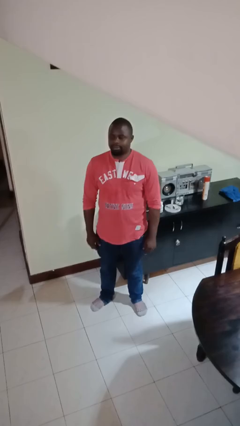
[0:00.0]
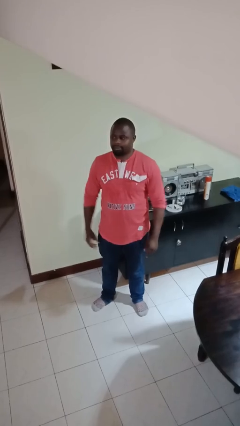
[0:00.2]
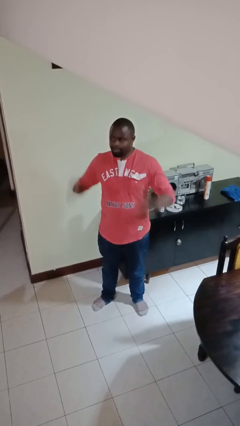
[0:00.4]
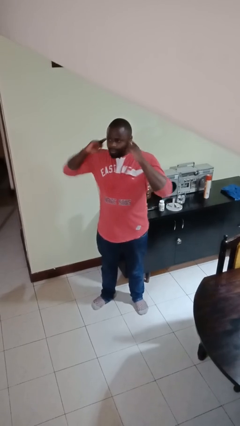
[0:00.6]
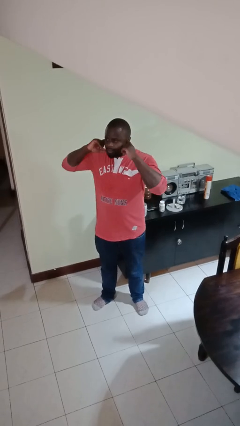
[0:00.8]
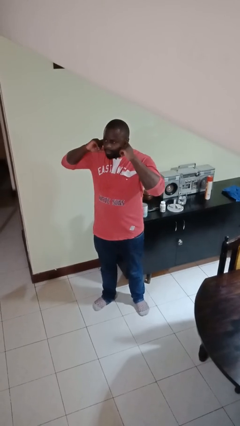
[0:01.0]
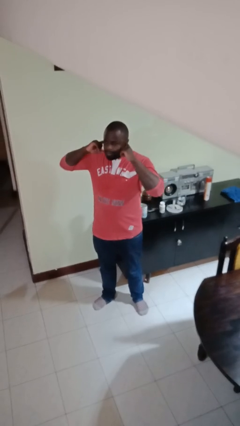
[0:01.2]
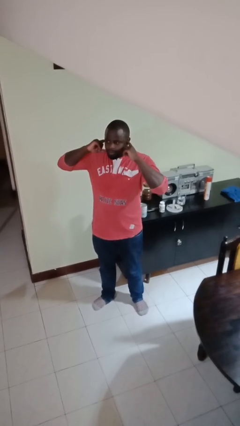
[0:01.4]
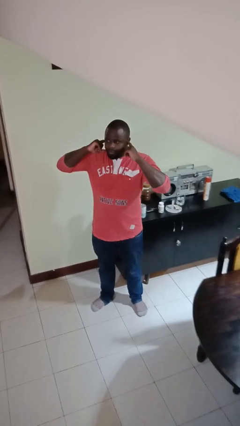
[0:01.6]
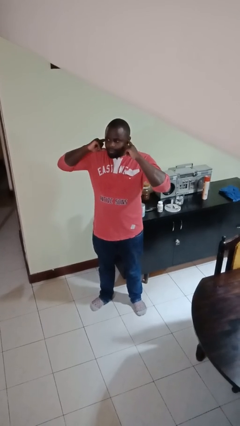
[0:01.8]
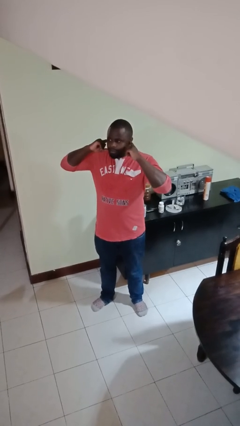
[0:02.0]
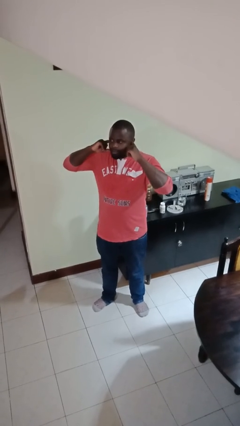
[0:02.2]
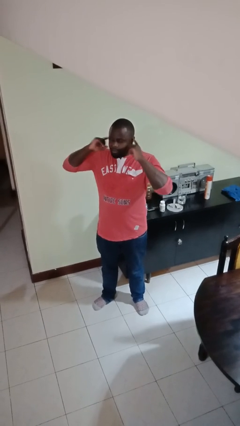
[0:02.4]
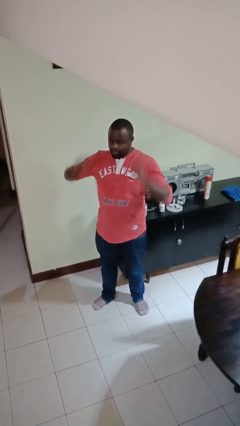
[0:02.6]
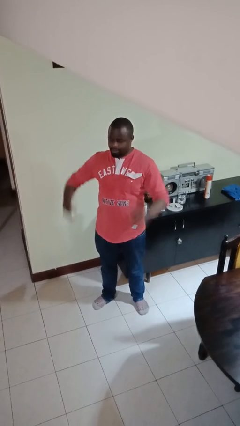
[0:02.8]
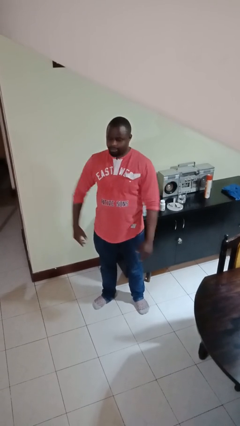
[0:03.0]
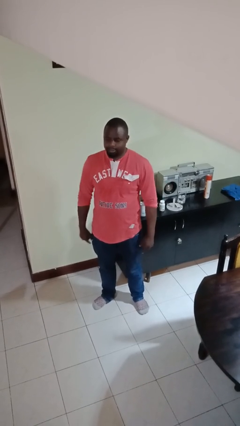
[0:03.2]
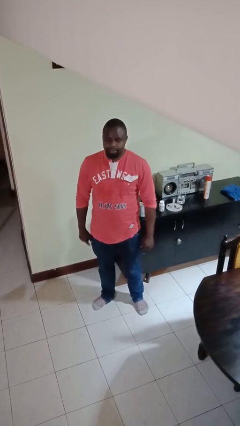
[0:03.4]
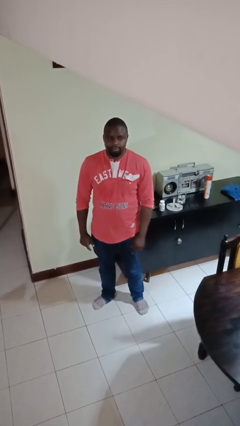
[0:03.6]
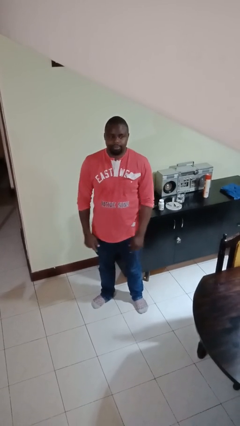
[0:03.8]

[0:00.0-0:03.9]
person puts fingers in ear

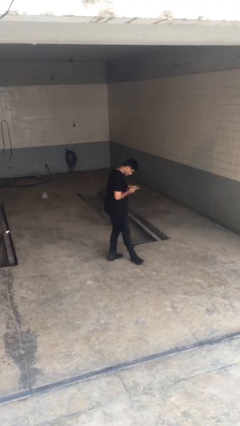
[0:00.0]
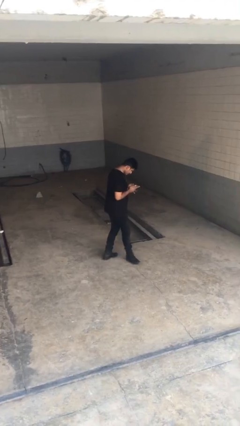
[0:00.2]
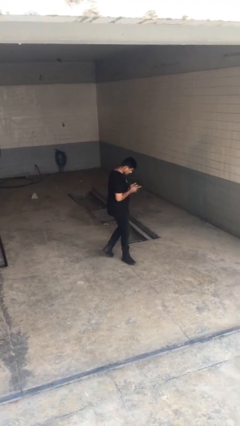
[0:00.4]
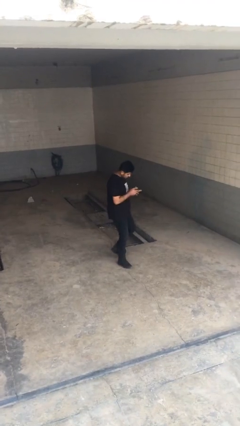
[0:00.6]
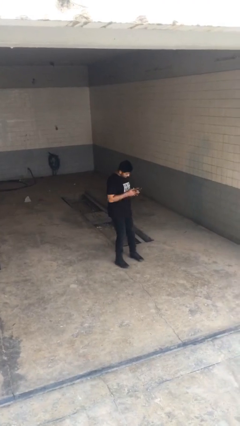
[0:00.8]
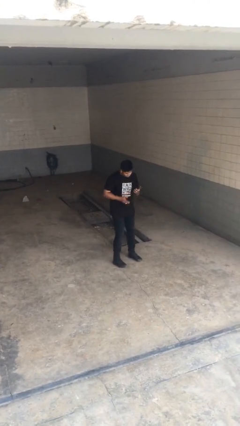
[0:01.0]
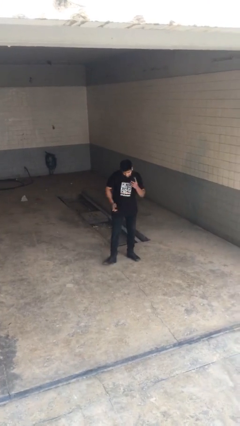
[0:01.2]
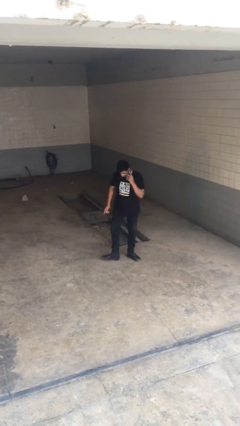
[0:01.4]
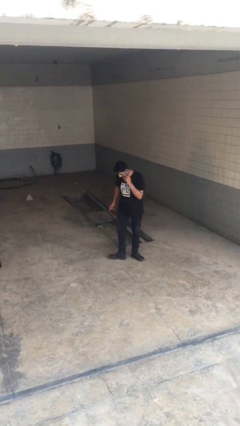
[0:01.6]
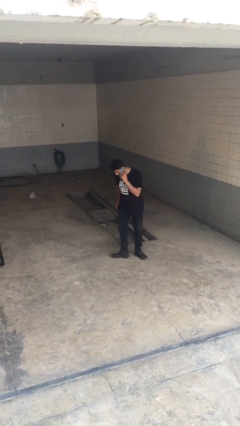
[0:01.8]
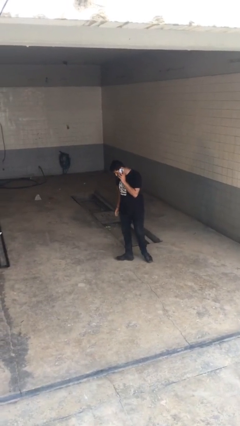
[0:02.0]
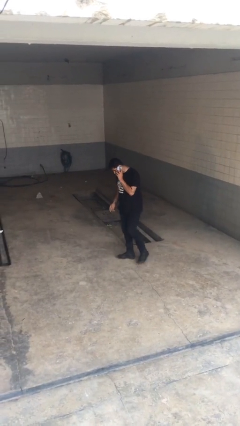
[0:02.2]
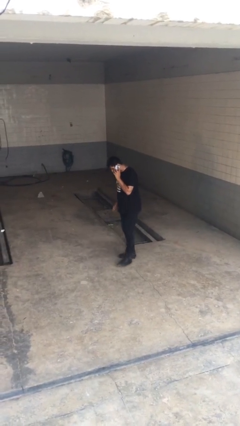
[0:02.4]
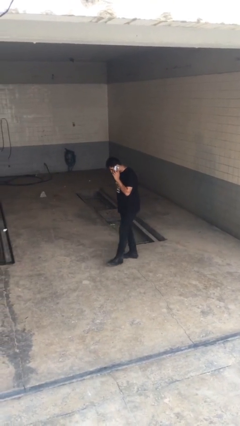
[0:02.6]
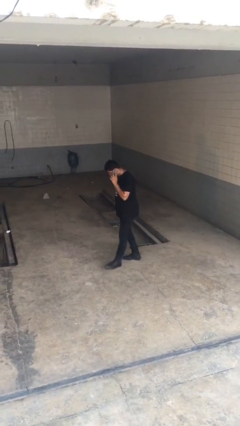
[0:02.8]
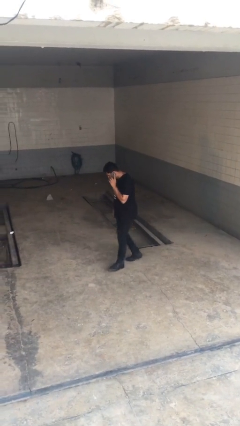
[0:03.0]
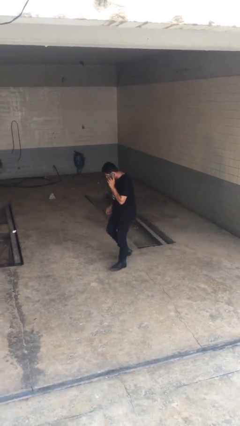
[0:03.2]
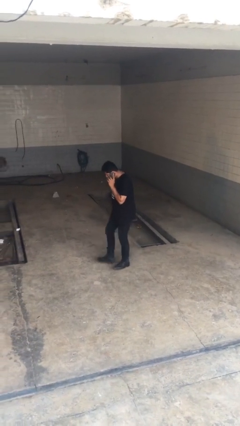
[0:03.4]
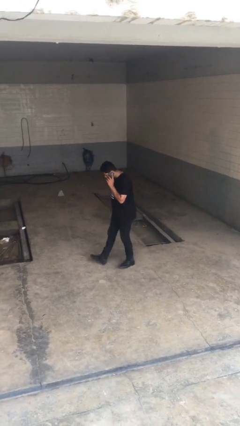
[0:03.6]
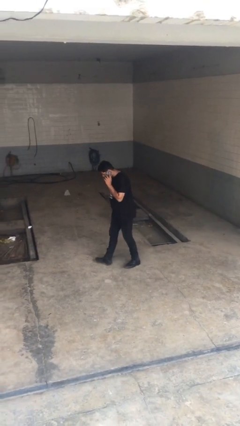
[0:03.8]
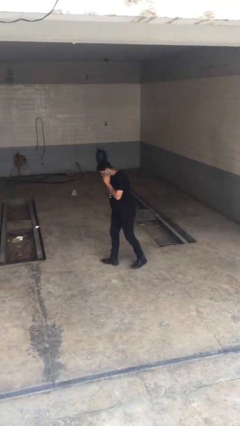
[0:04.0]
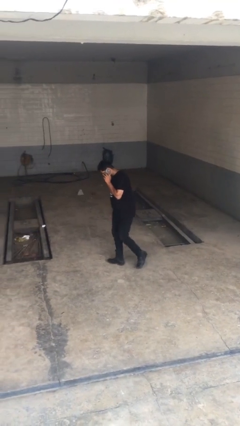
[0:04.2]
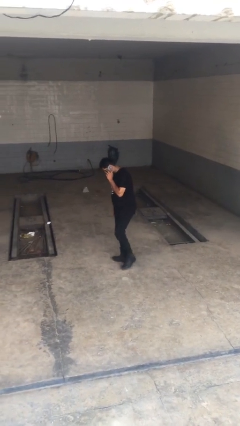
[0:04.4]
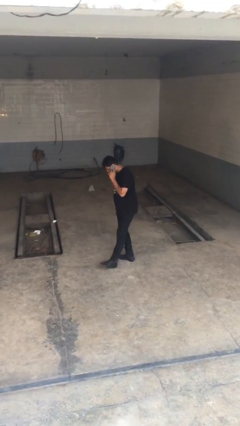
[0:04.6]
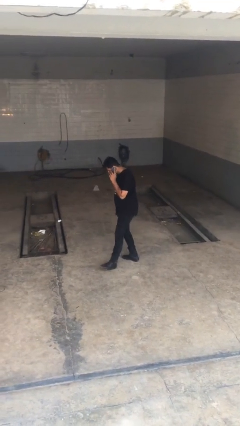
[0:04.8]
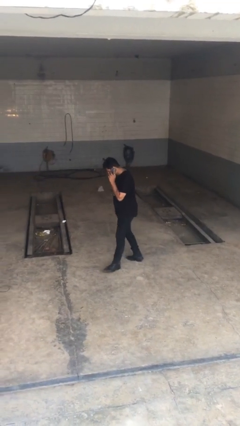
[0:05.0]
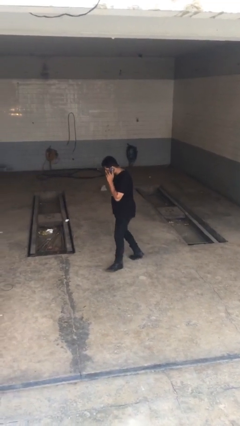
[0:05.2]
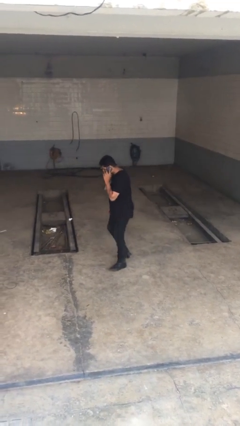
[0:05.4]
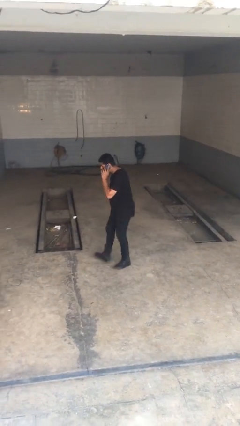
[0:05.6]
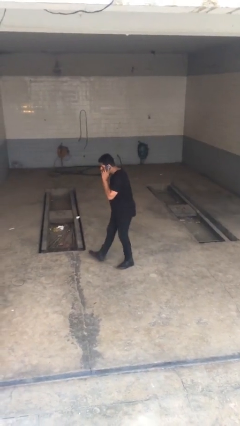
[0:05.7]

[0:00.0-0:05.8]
person talks on phone

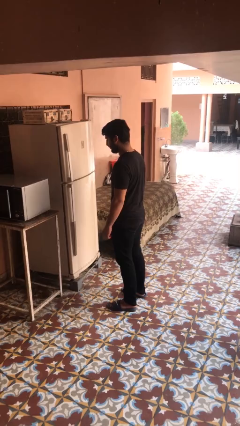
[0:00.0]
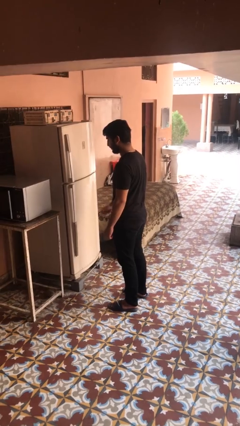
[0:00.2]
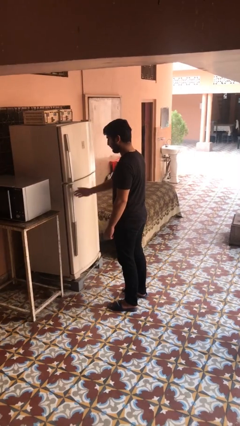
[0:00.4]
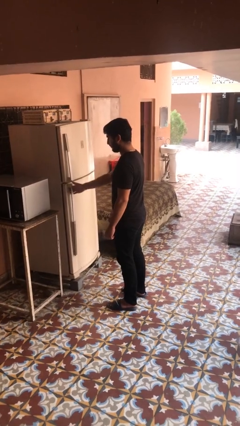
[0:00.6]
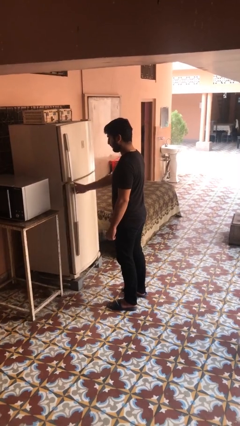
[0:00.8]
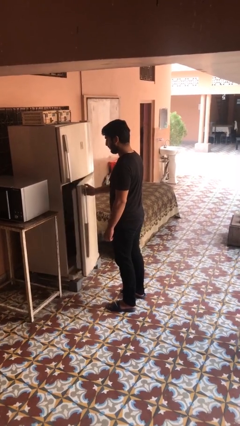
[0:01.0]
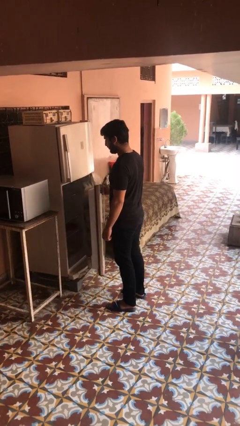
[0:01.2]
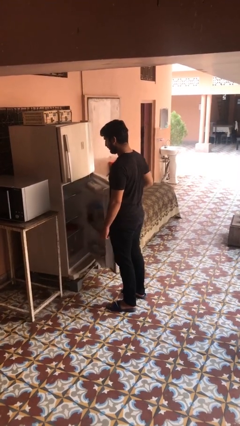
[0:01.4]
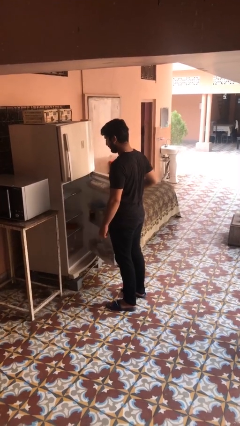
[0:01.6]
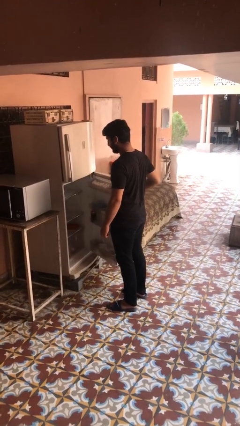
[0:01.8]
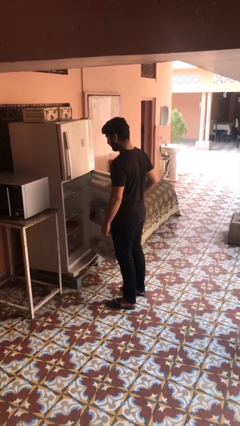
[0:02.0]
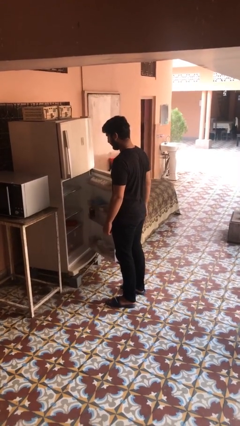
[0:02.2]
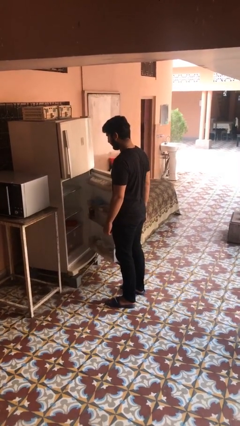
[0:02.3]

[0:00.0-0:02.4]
person opens refrigerator

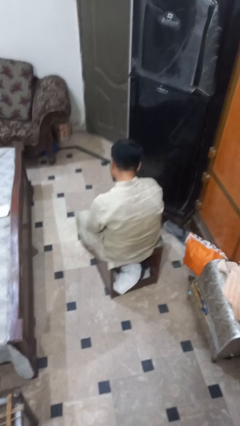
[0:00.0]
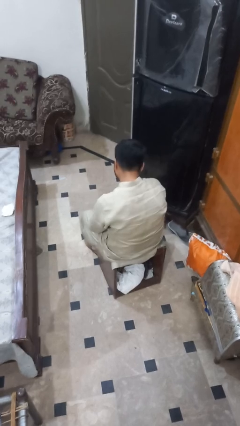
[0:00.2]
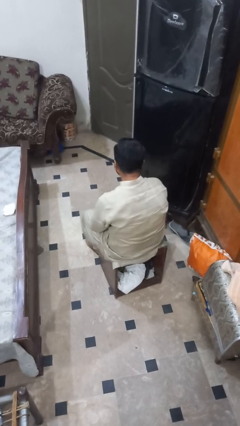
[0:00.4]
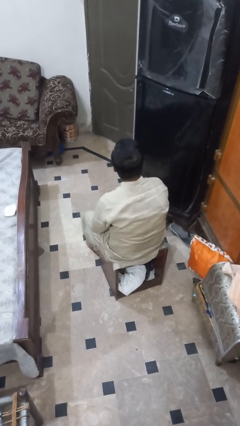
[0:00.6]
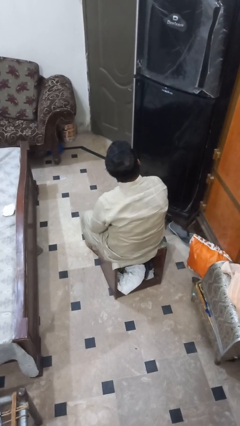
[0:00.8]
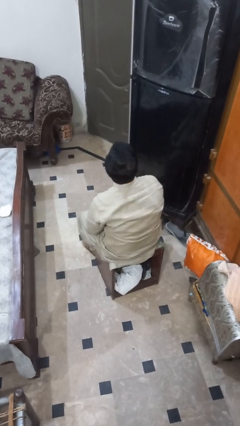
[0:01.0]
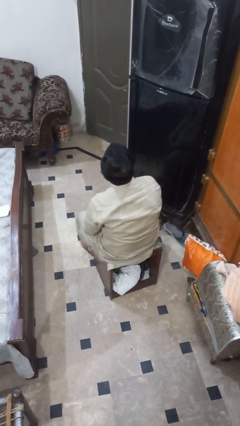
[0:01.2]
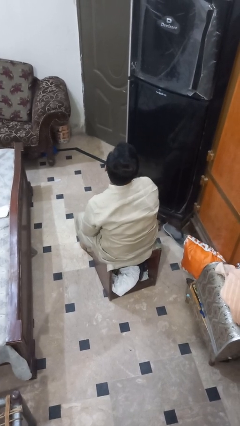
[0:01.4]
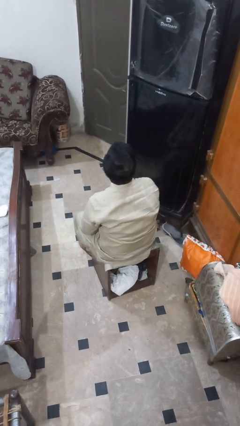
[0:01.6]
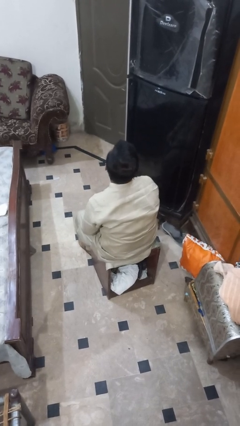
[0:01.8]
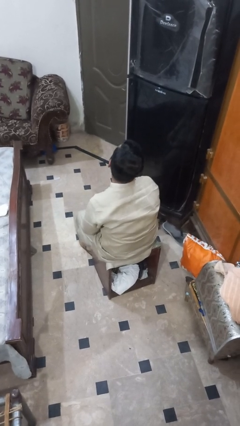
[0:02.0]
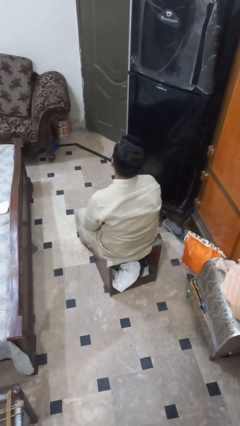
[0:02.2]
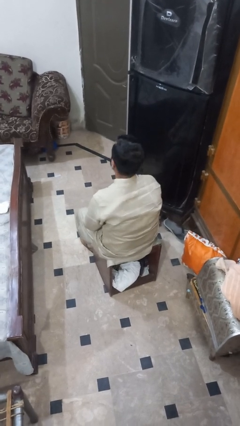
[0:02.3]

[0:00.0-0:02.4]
person sticks out tongue

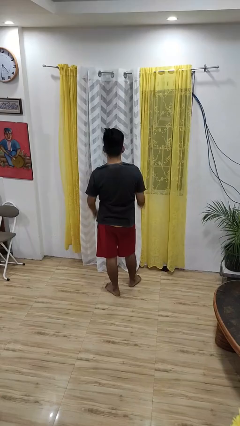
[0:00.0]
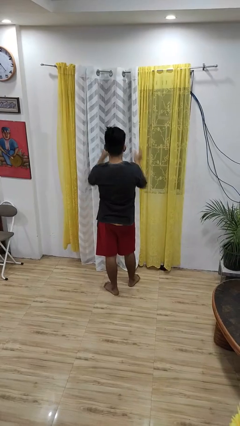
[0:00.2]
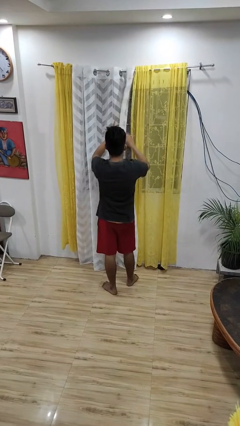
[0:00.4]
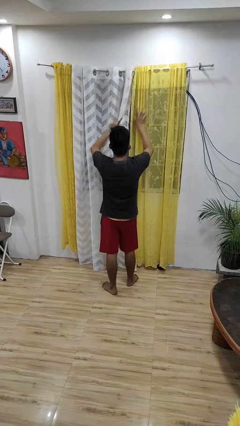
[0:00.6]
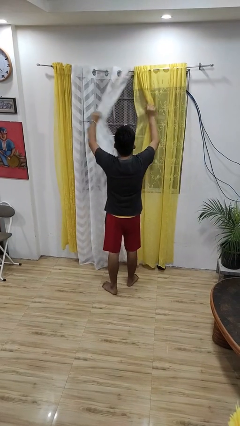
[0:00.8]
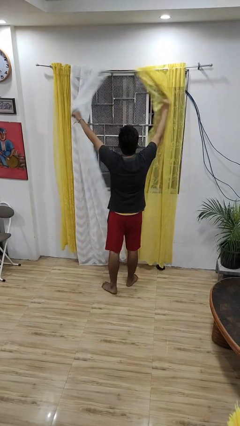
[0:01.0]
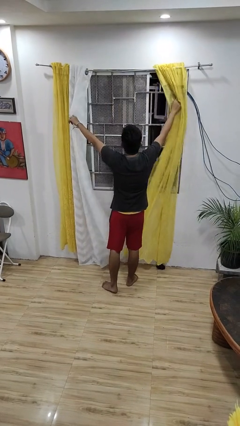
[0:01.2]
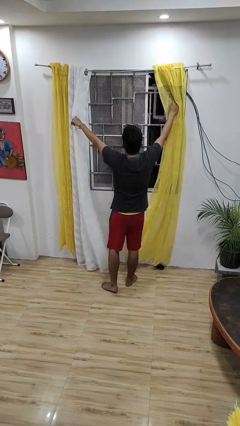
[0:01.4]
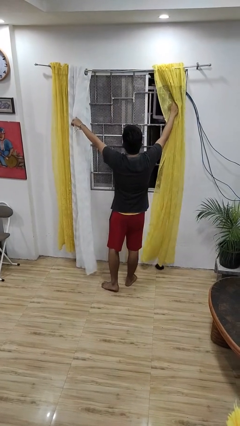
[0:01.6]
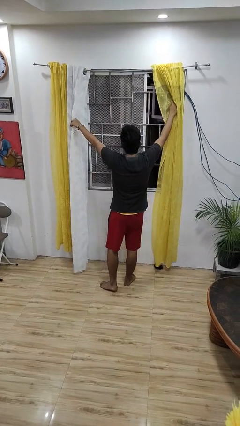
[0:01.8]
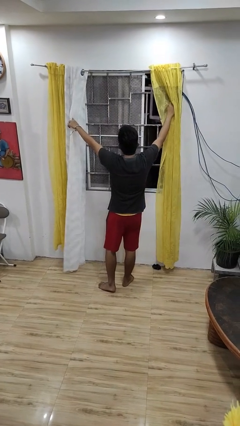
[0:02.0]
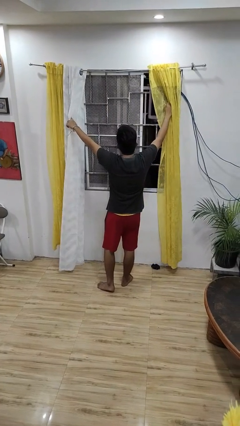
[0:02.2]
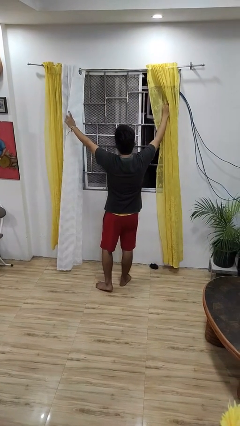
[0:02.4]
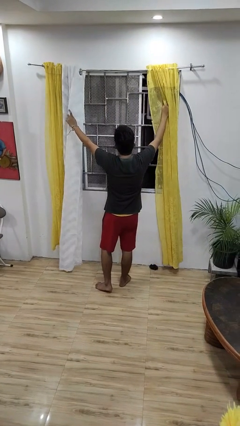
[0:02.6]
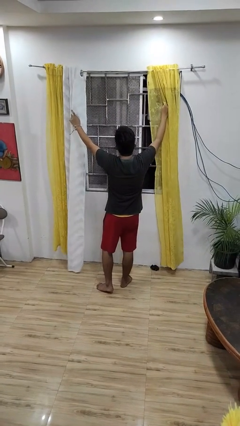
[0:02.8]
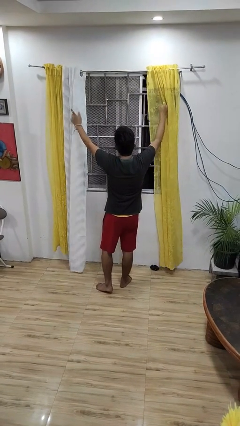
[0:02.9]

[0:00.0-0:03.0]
person opens curtains

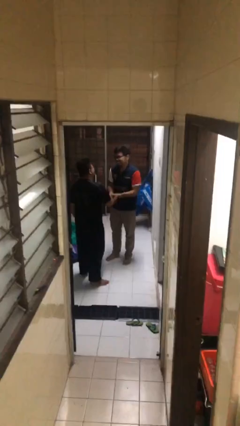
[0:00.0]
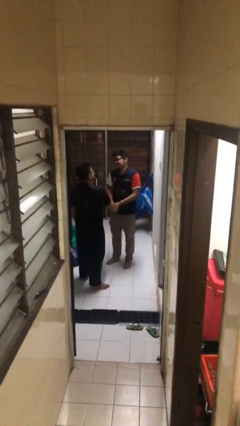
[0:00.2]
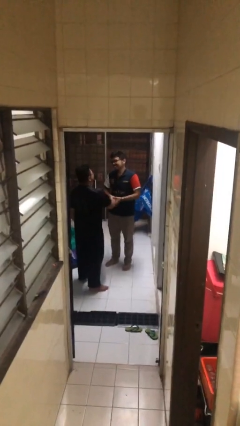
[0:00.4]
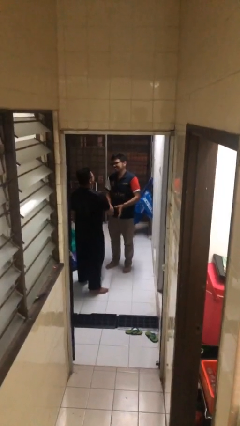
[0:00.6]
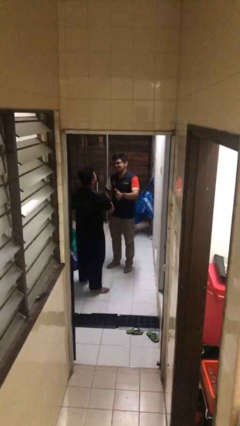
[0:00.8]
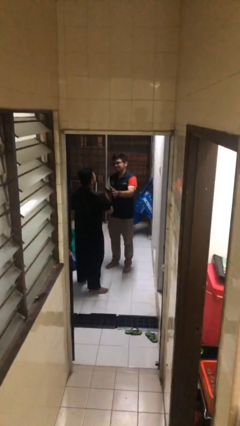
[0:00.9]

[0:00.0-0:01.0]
person talks to person
